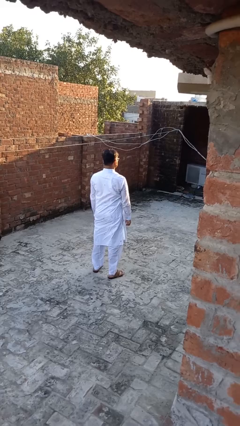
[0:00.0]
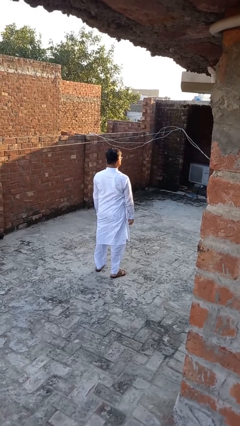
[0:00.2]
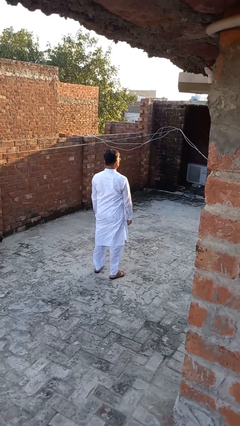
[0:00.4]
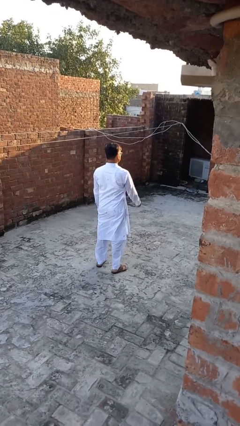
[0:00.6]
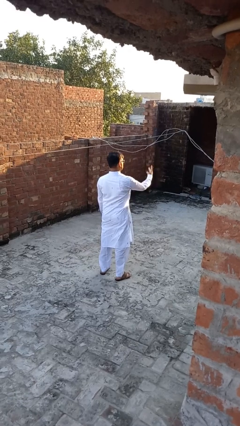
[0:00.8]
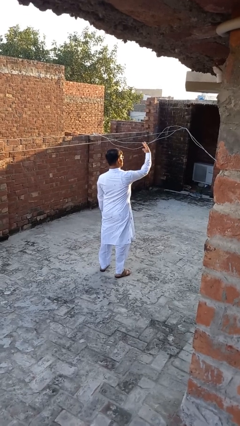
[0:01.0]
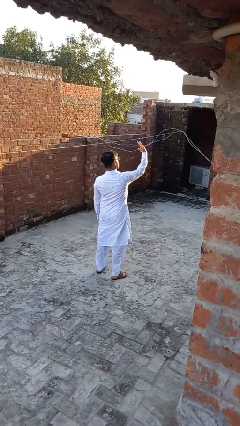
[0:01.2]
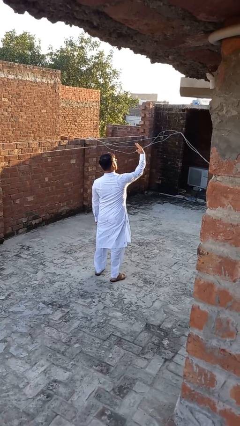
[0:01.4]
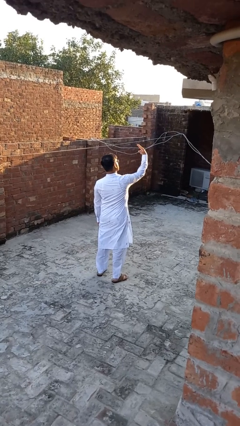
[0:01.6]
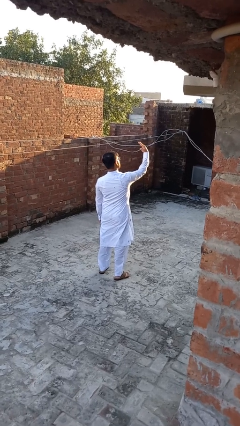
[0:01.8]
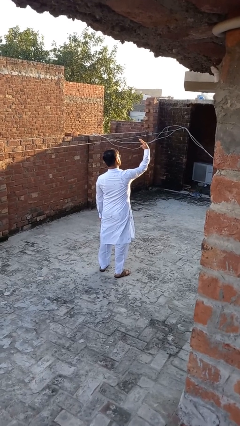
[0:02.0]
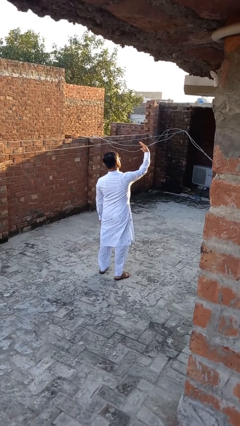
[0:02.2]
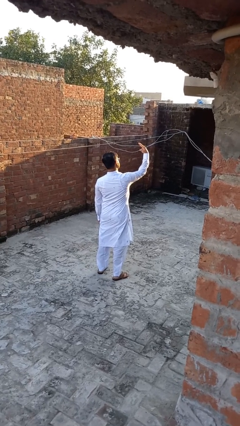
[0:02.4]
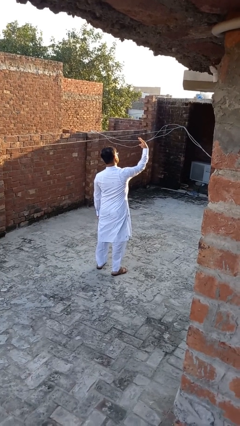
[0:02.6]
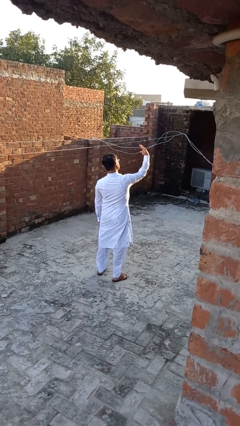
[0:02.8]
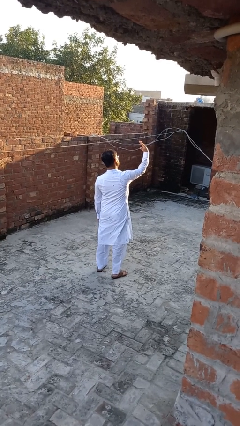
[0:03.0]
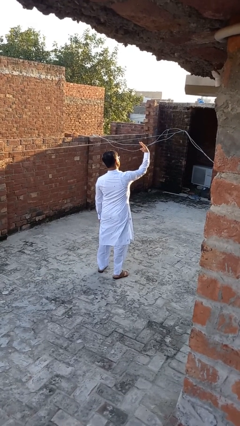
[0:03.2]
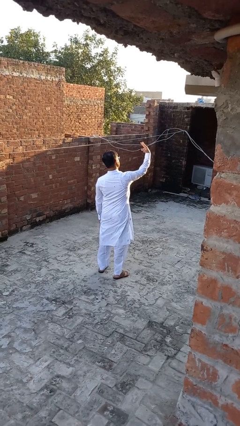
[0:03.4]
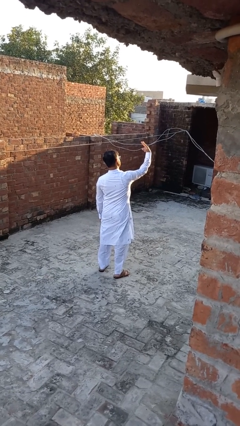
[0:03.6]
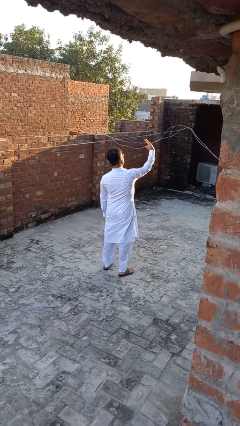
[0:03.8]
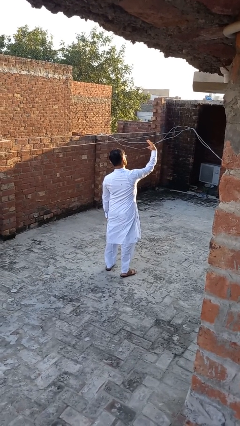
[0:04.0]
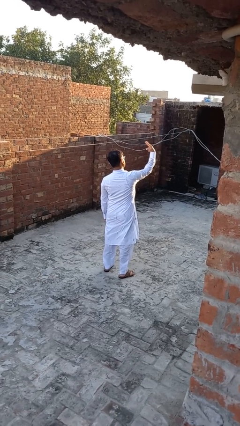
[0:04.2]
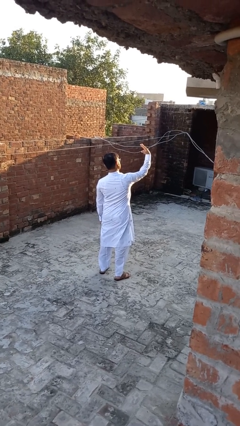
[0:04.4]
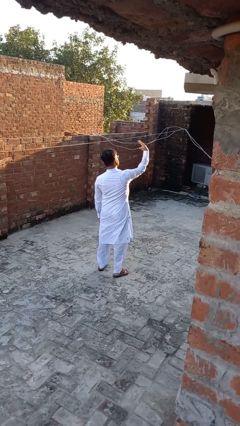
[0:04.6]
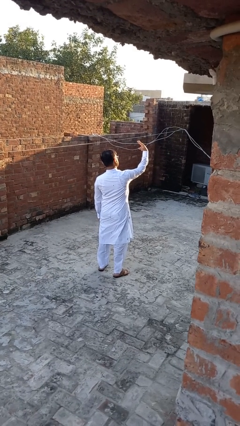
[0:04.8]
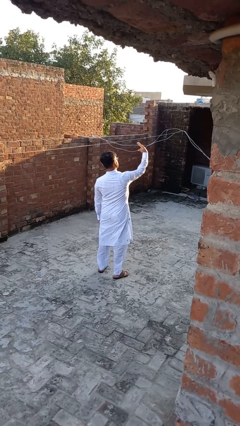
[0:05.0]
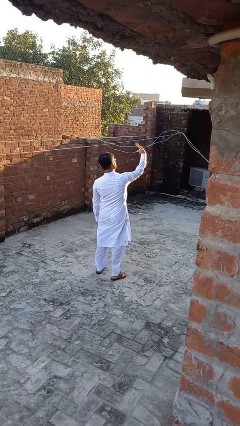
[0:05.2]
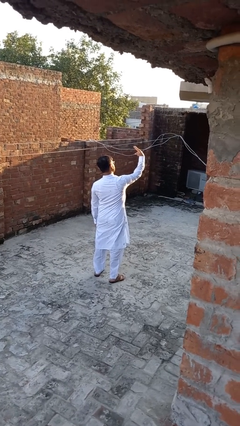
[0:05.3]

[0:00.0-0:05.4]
person gestures peace

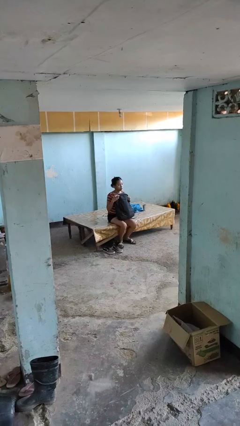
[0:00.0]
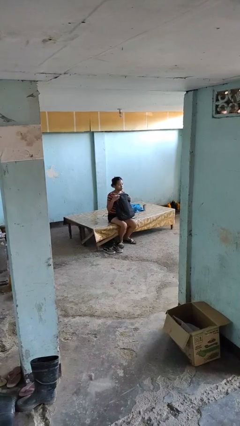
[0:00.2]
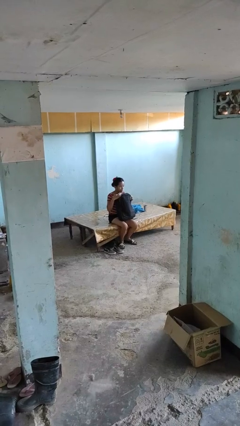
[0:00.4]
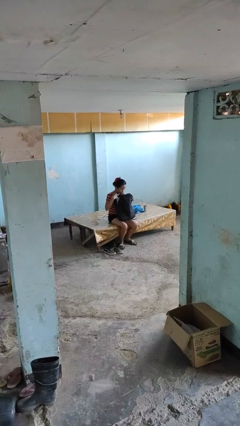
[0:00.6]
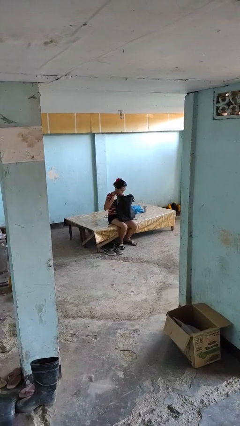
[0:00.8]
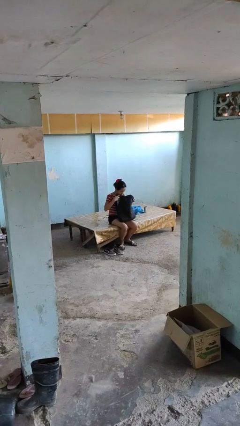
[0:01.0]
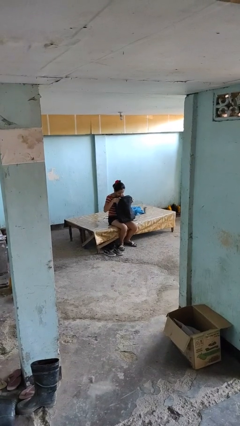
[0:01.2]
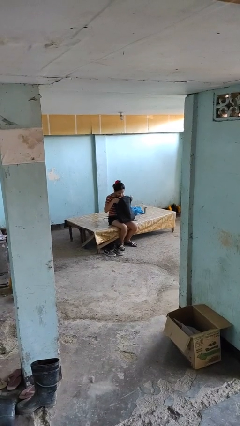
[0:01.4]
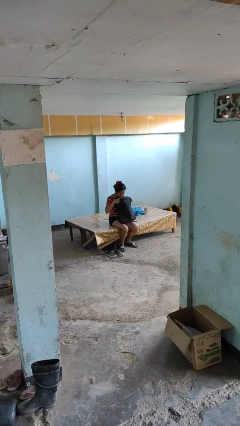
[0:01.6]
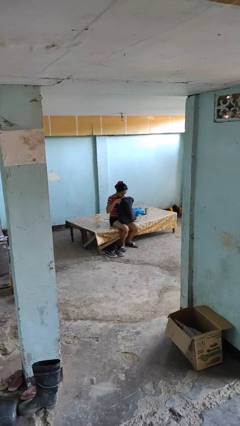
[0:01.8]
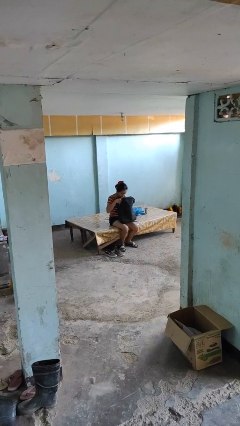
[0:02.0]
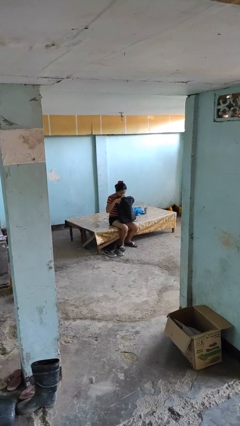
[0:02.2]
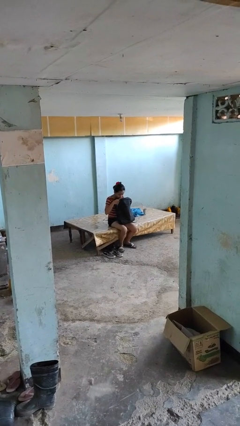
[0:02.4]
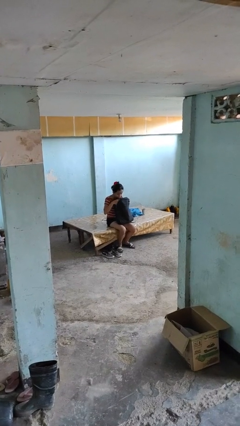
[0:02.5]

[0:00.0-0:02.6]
person searches in backpack

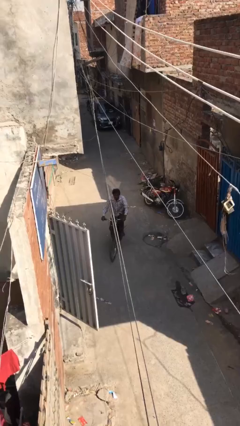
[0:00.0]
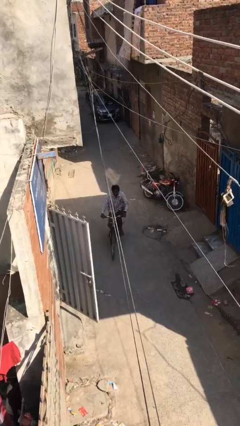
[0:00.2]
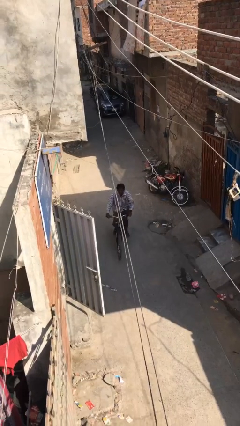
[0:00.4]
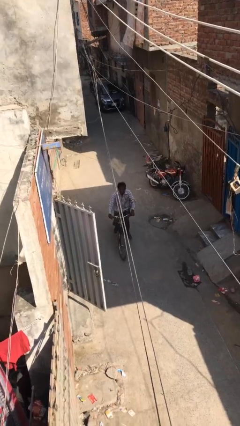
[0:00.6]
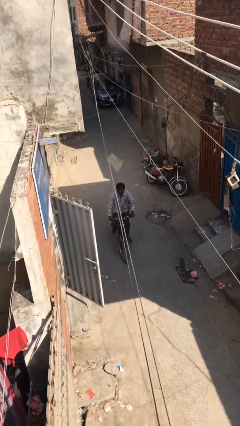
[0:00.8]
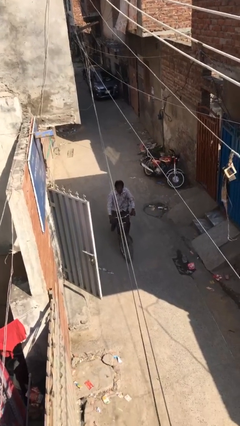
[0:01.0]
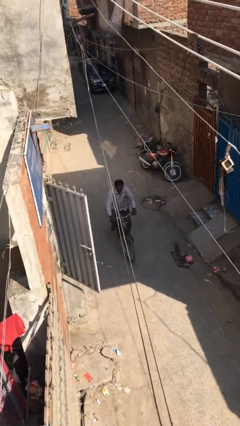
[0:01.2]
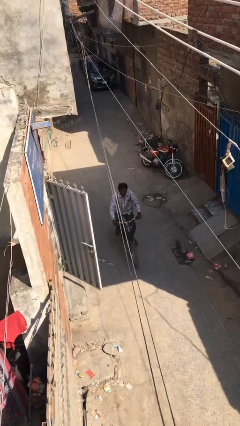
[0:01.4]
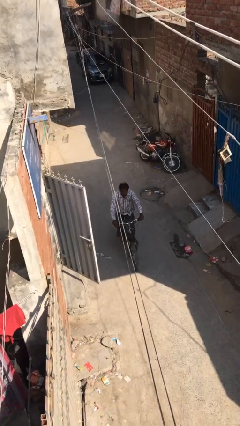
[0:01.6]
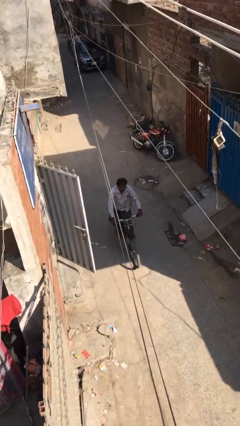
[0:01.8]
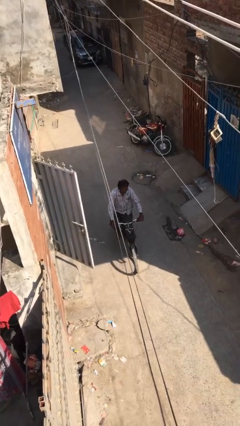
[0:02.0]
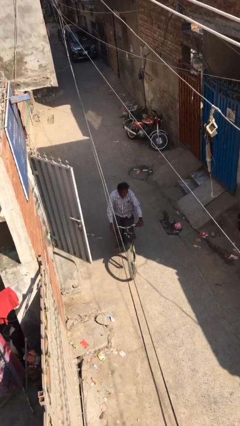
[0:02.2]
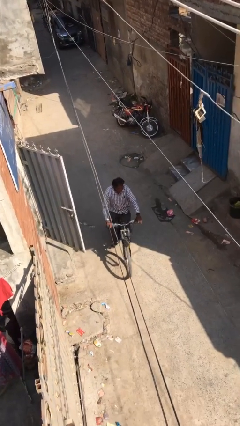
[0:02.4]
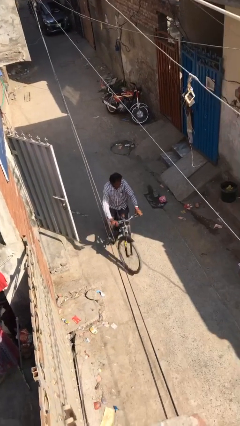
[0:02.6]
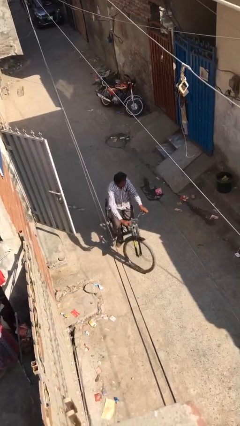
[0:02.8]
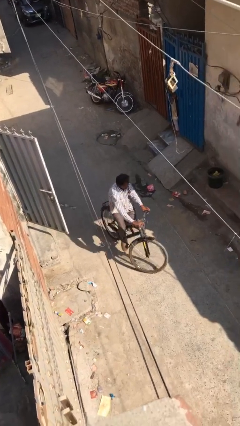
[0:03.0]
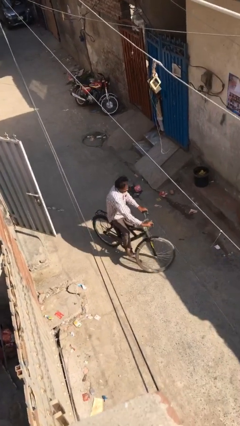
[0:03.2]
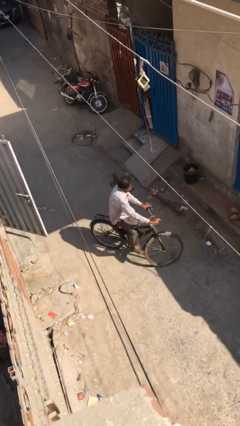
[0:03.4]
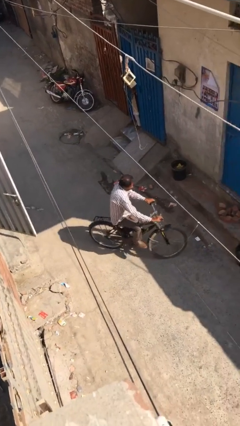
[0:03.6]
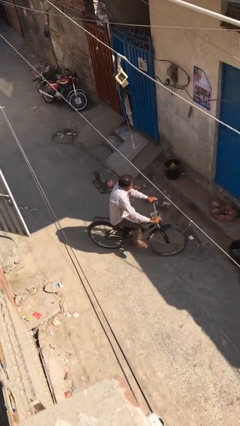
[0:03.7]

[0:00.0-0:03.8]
person rides bicycle

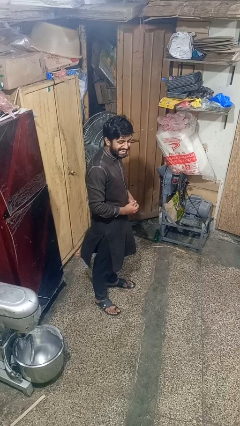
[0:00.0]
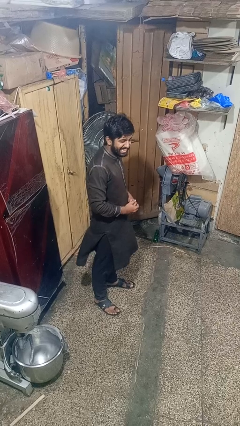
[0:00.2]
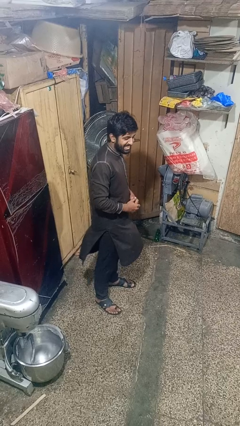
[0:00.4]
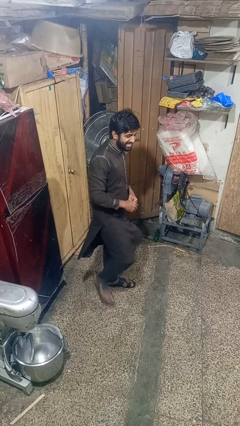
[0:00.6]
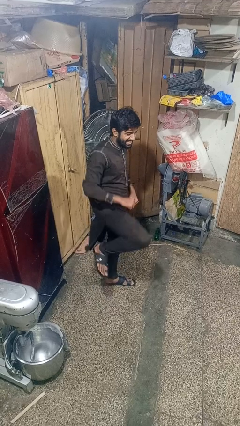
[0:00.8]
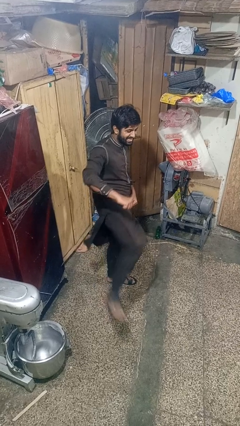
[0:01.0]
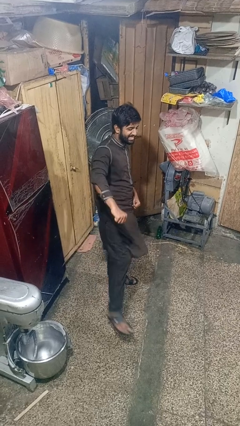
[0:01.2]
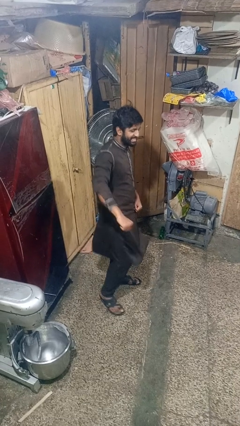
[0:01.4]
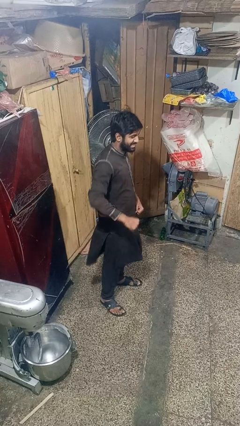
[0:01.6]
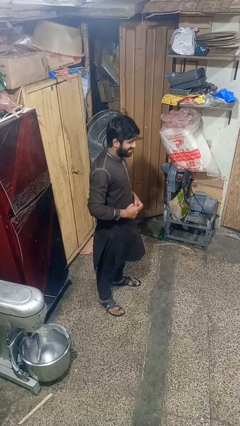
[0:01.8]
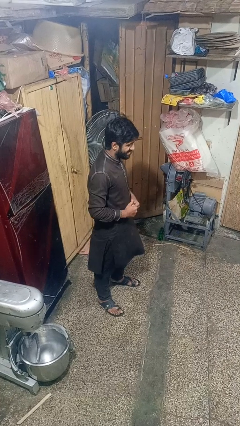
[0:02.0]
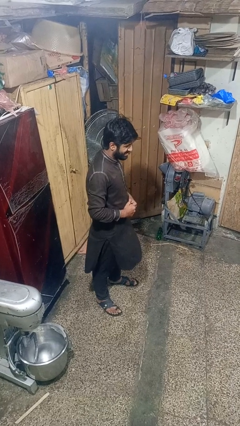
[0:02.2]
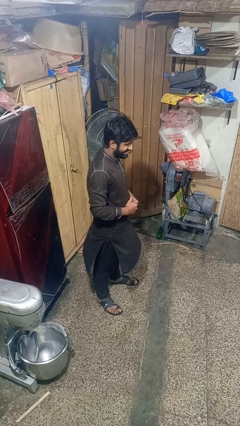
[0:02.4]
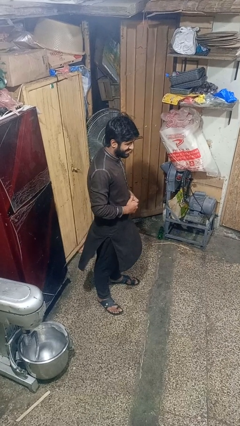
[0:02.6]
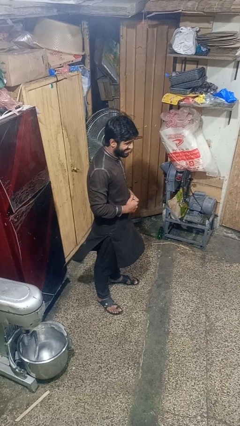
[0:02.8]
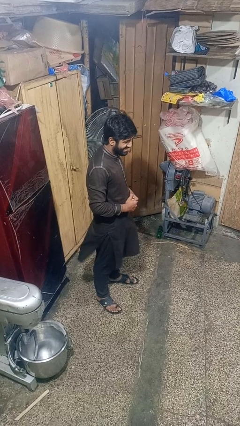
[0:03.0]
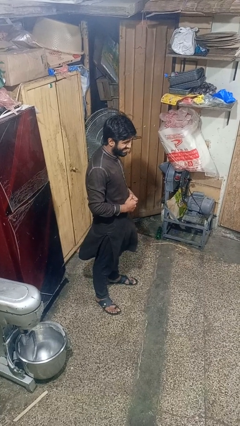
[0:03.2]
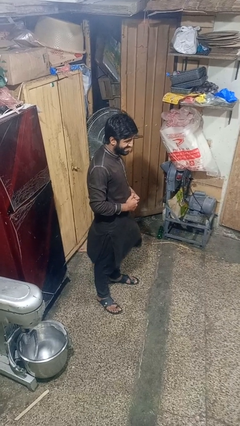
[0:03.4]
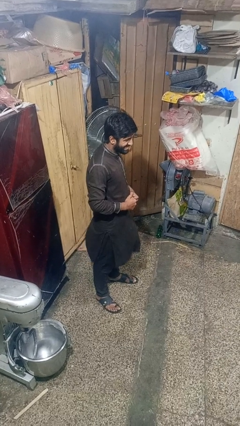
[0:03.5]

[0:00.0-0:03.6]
person karate kicks

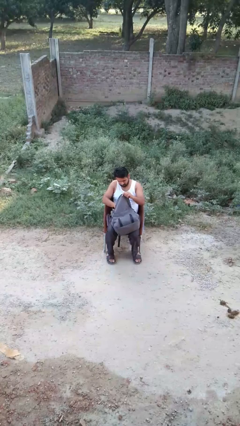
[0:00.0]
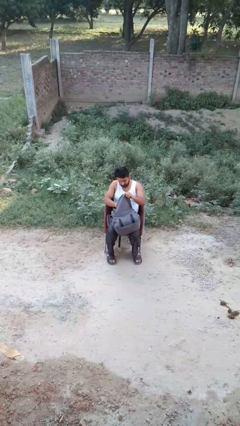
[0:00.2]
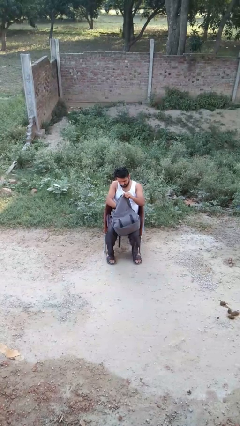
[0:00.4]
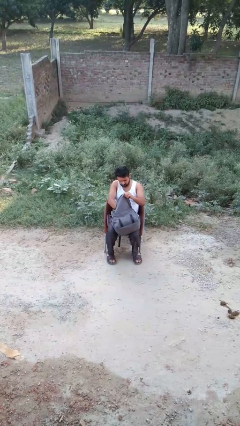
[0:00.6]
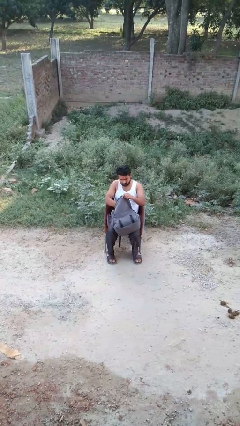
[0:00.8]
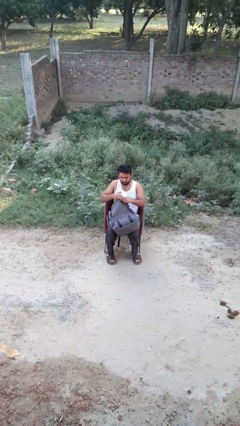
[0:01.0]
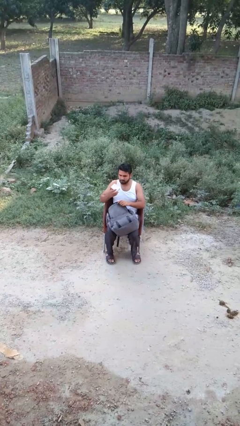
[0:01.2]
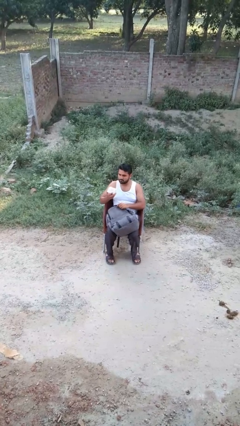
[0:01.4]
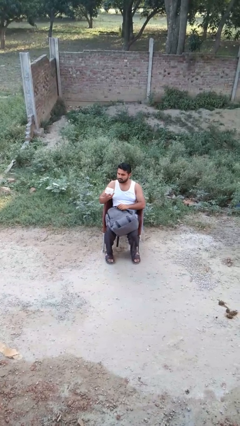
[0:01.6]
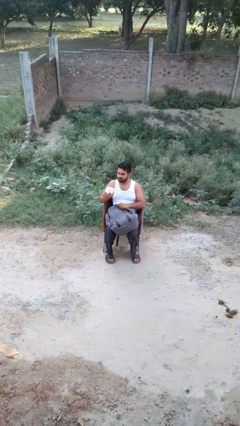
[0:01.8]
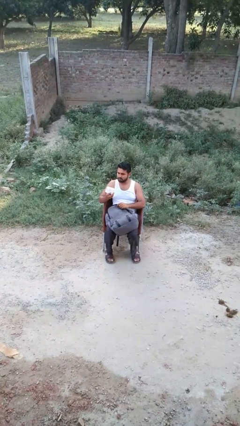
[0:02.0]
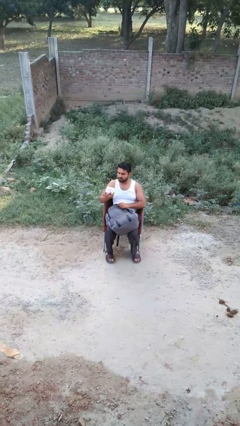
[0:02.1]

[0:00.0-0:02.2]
person takes object from backpack
